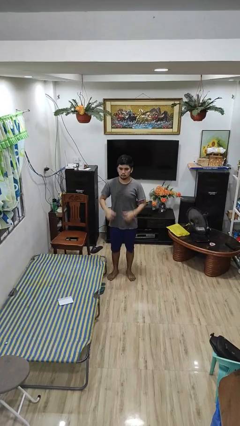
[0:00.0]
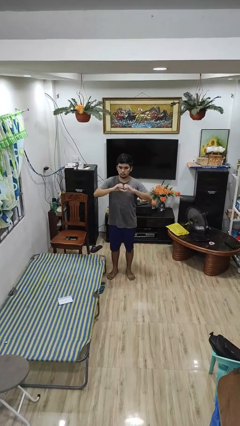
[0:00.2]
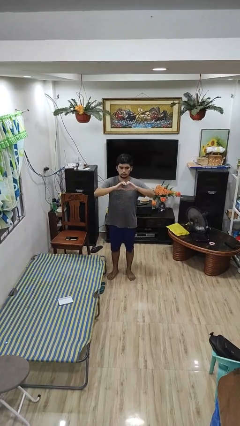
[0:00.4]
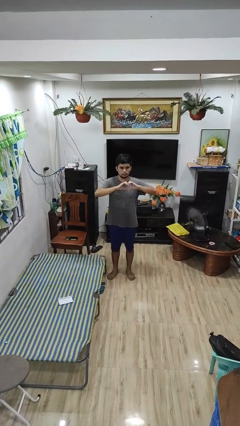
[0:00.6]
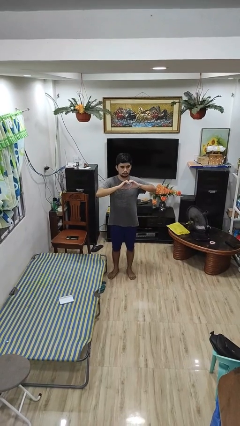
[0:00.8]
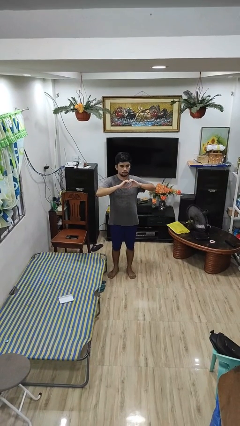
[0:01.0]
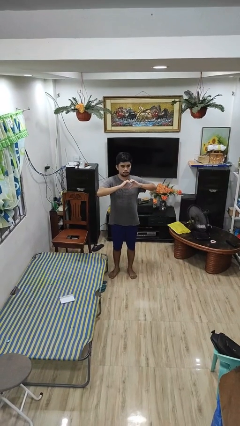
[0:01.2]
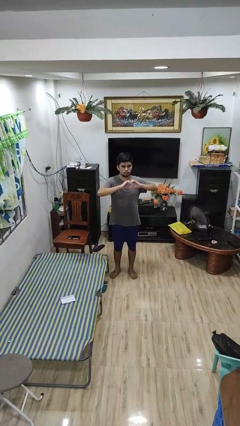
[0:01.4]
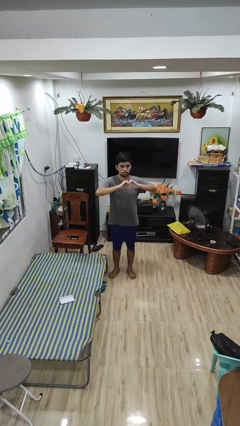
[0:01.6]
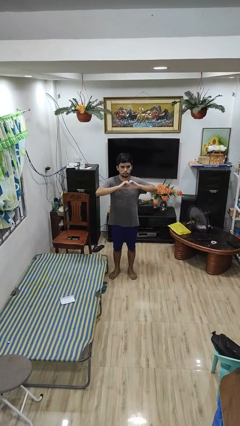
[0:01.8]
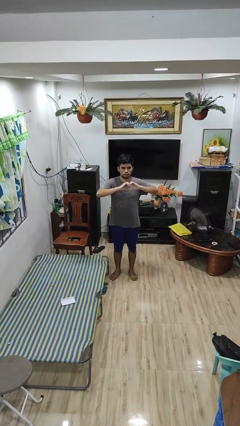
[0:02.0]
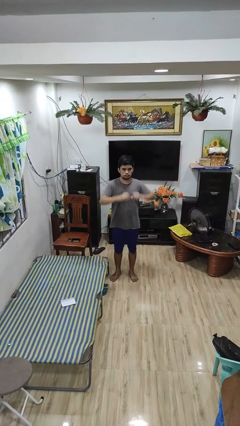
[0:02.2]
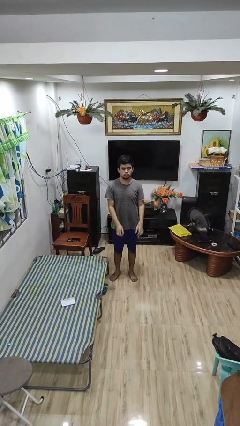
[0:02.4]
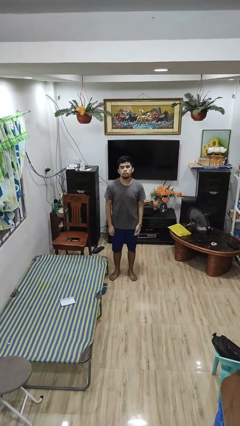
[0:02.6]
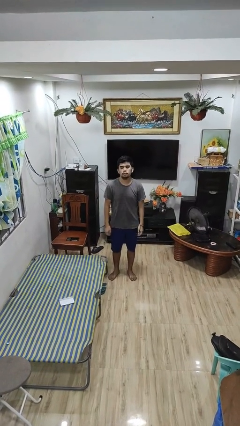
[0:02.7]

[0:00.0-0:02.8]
person gestures heart

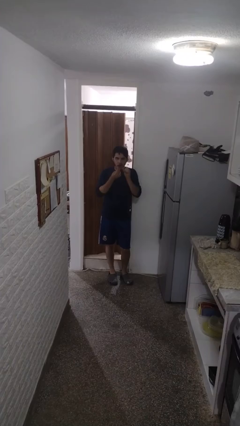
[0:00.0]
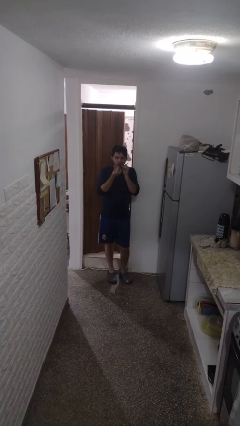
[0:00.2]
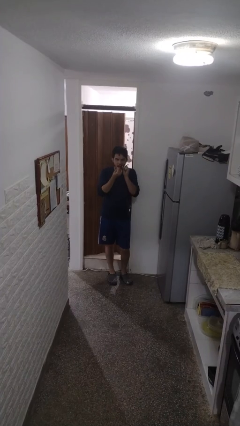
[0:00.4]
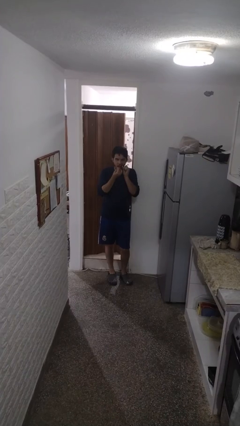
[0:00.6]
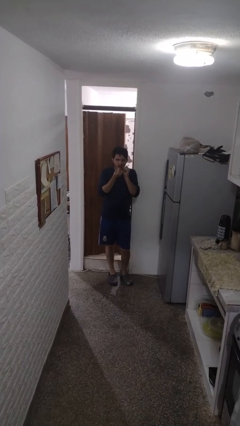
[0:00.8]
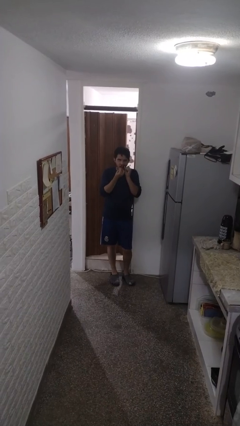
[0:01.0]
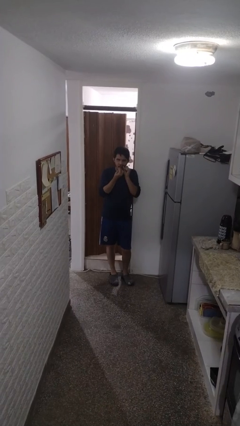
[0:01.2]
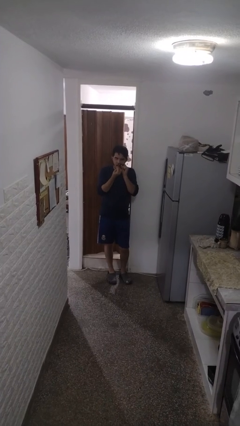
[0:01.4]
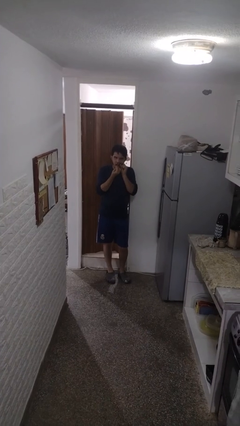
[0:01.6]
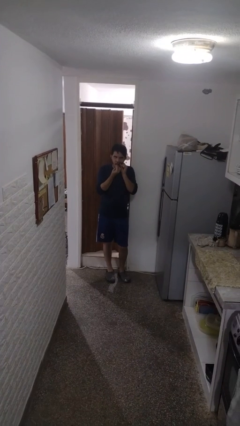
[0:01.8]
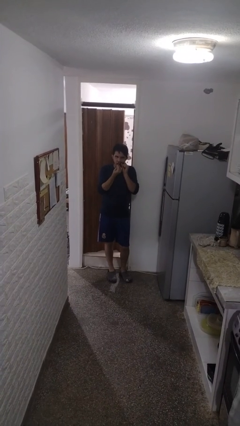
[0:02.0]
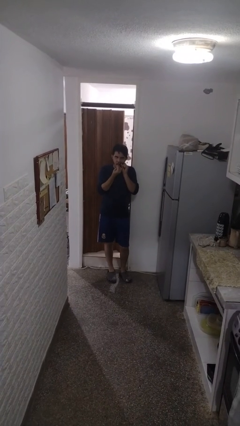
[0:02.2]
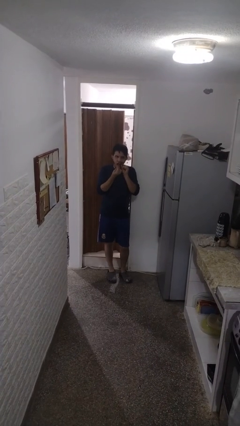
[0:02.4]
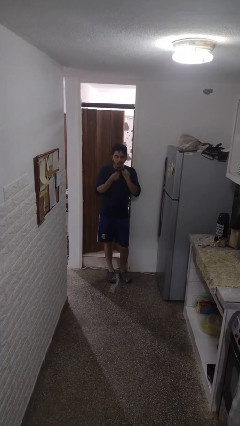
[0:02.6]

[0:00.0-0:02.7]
person flosses

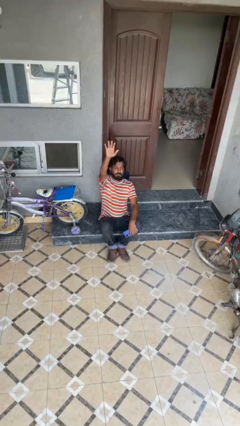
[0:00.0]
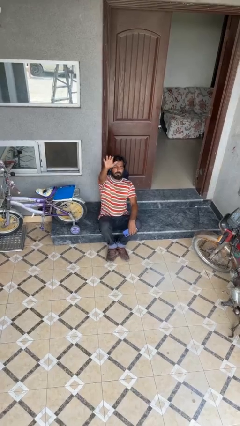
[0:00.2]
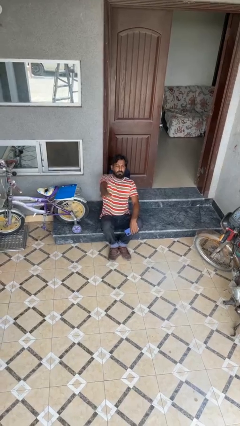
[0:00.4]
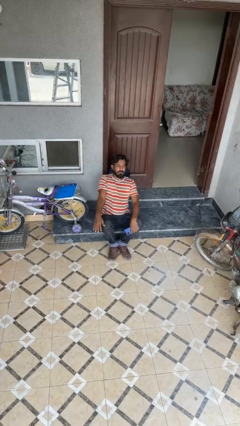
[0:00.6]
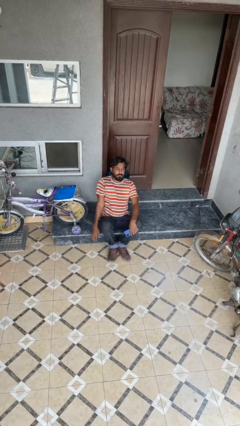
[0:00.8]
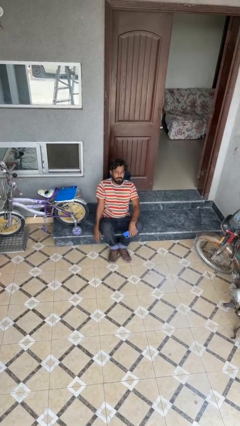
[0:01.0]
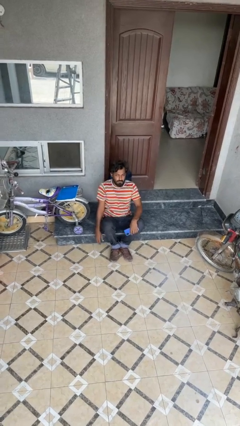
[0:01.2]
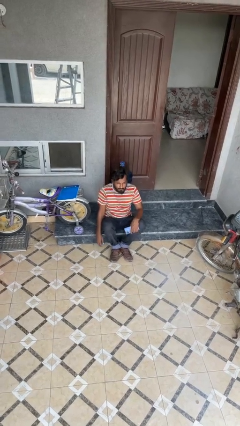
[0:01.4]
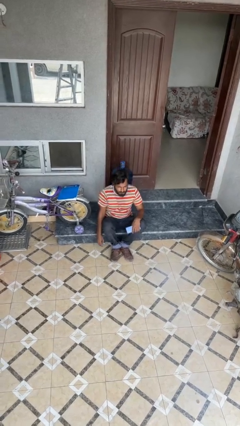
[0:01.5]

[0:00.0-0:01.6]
person gestures lower hand

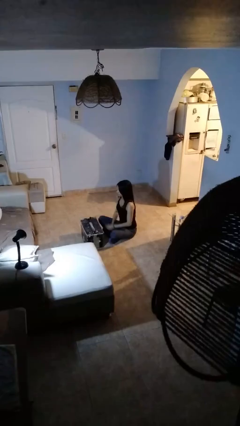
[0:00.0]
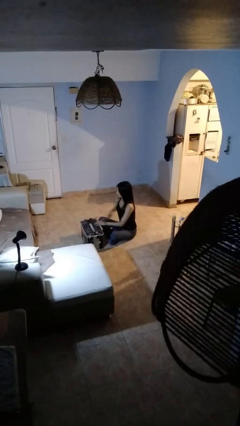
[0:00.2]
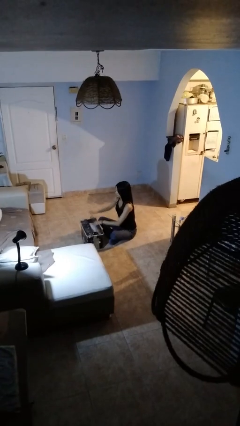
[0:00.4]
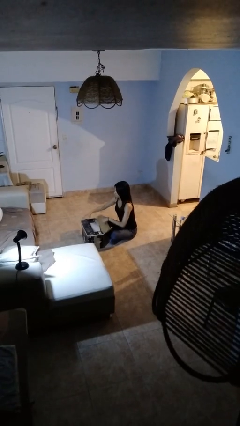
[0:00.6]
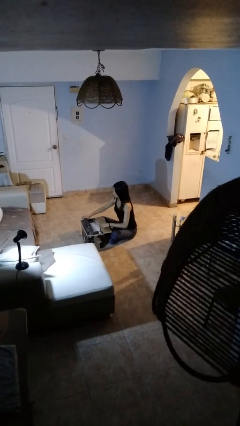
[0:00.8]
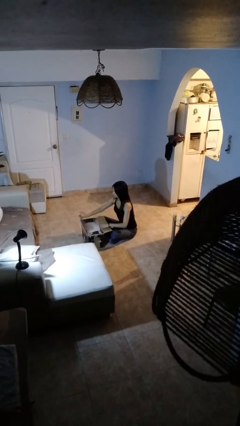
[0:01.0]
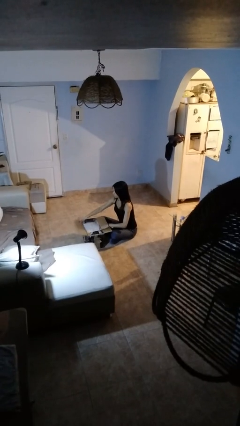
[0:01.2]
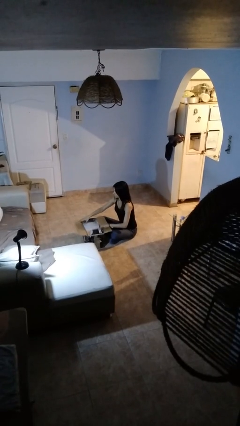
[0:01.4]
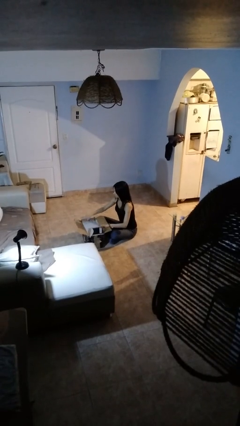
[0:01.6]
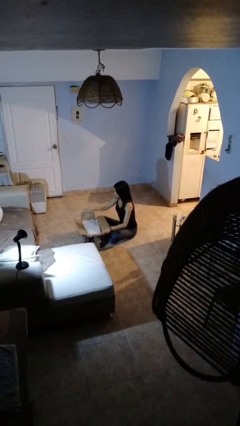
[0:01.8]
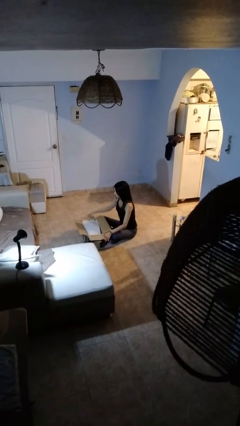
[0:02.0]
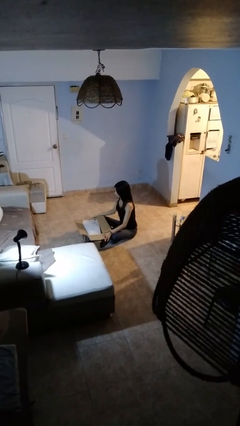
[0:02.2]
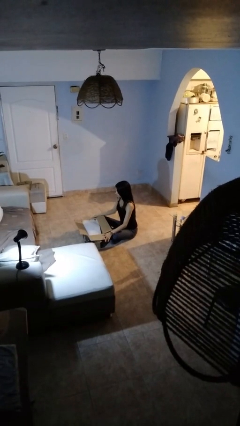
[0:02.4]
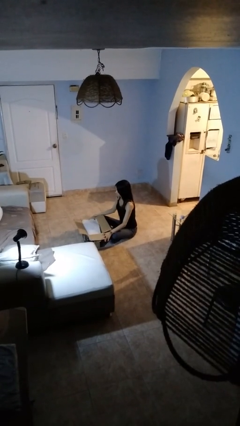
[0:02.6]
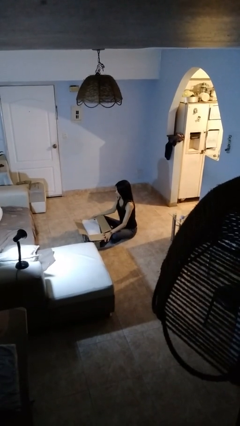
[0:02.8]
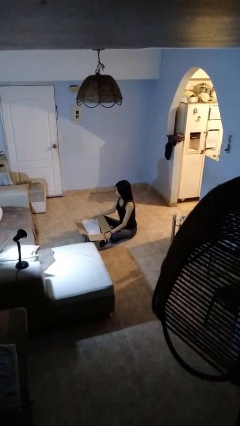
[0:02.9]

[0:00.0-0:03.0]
person opens box

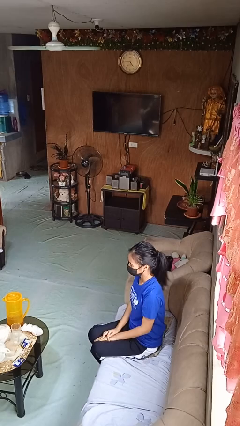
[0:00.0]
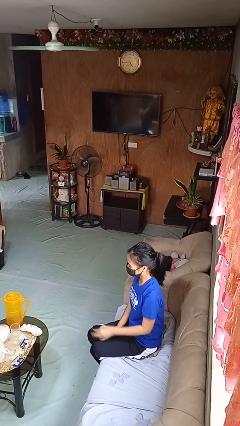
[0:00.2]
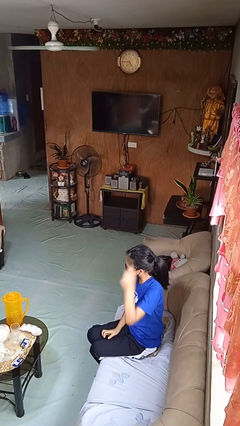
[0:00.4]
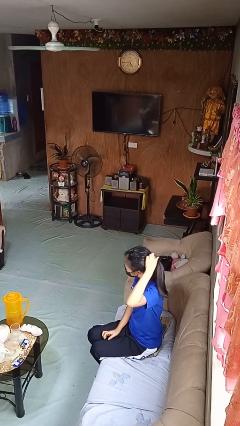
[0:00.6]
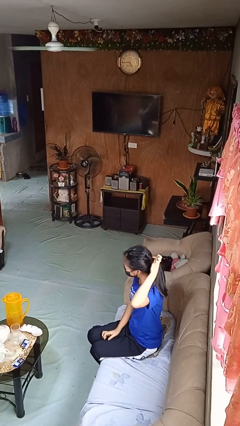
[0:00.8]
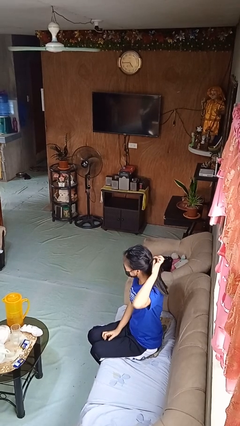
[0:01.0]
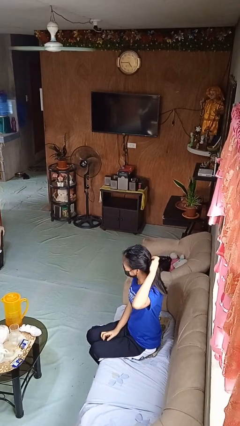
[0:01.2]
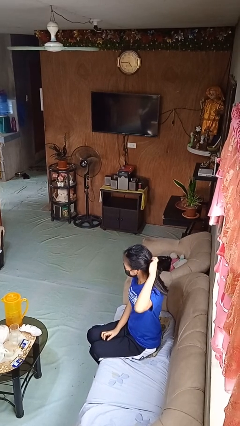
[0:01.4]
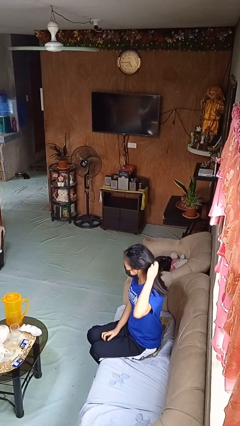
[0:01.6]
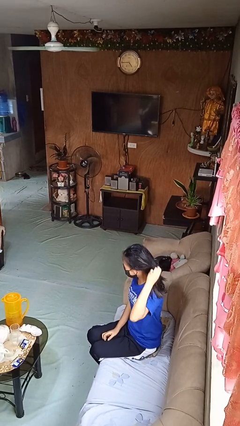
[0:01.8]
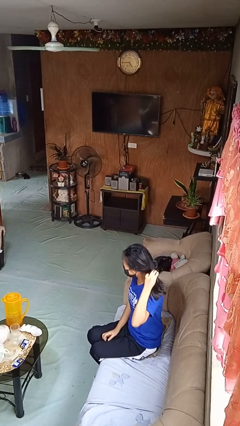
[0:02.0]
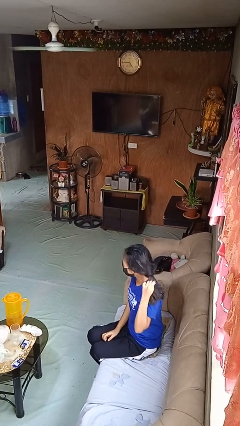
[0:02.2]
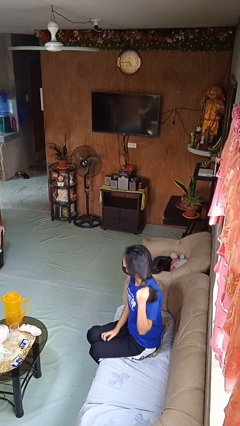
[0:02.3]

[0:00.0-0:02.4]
person takes off hairtie

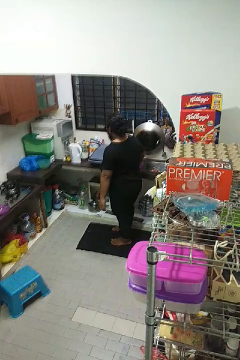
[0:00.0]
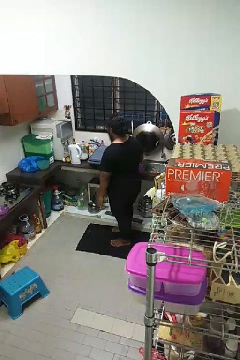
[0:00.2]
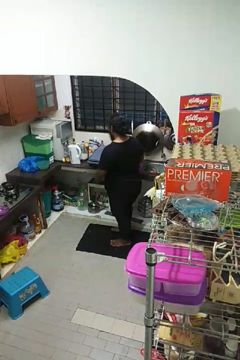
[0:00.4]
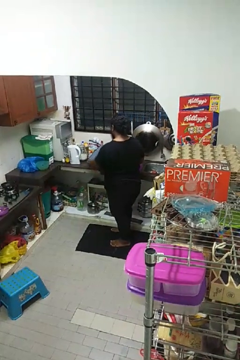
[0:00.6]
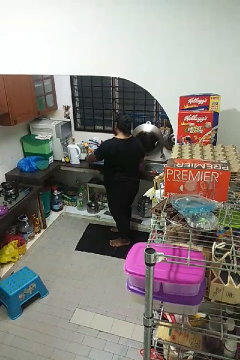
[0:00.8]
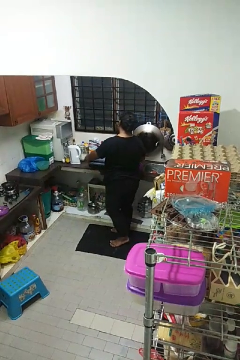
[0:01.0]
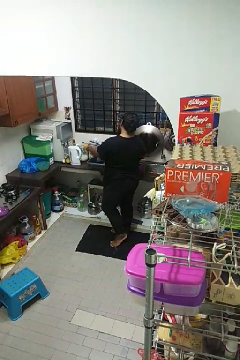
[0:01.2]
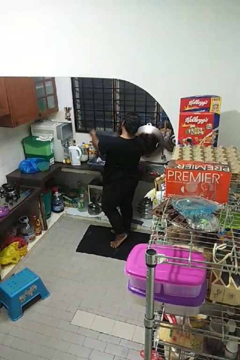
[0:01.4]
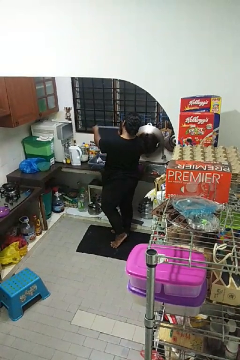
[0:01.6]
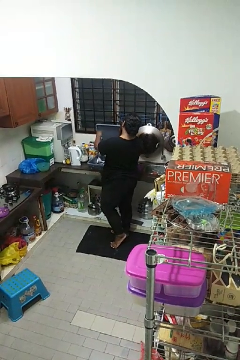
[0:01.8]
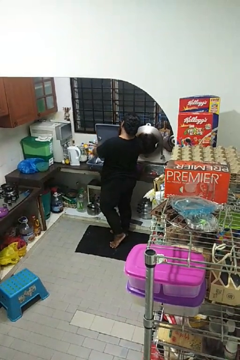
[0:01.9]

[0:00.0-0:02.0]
person opens dishwasher

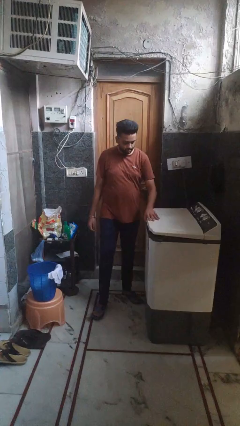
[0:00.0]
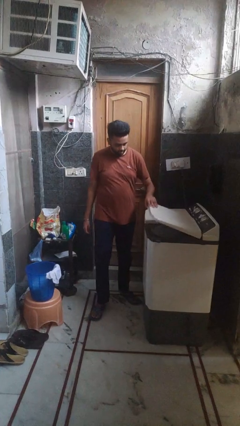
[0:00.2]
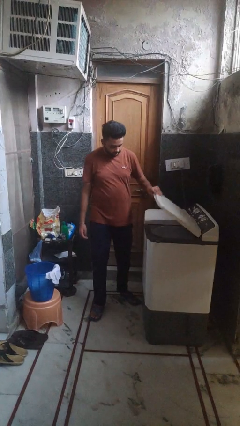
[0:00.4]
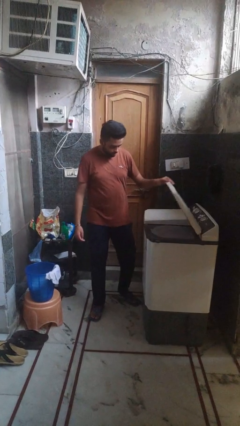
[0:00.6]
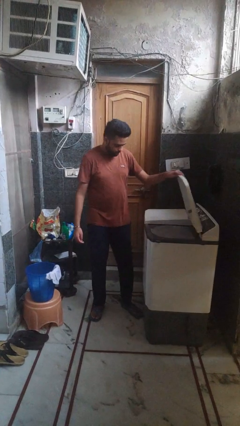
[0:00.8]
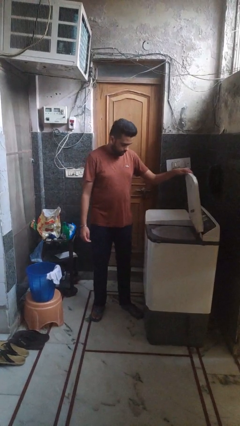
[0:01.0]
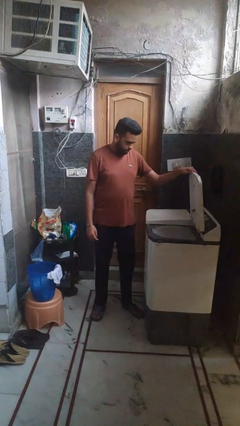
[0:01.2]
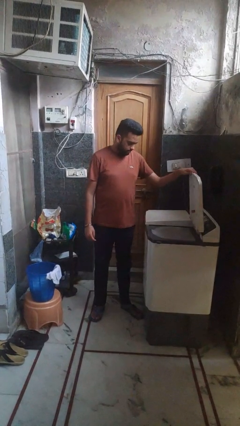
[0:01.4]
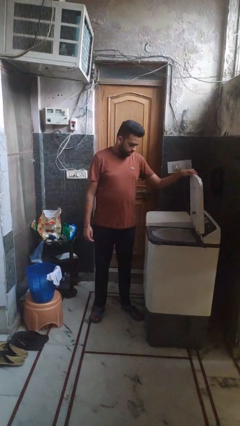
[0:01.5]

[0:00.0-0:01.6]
person opens clothes washer

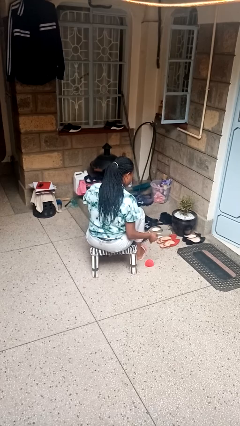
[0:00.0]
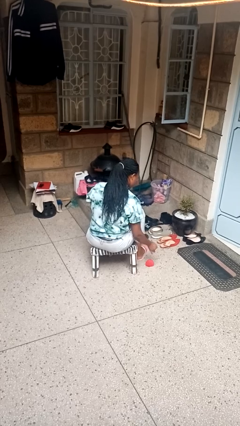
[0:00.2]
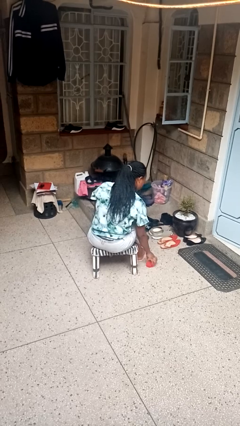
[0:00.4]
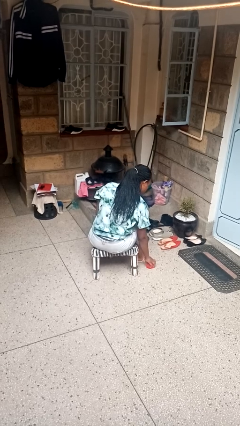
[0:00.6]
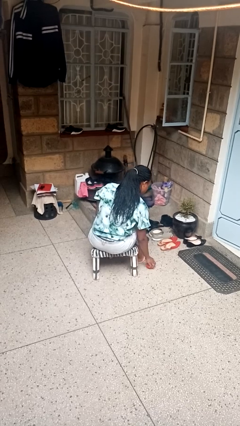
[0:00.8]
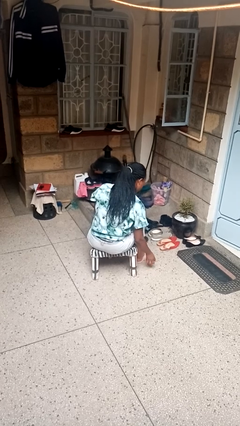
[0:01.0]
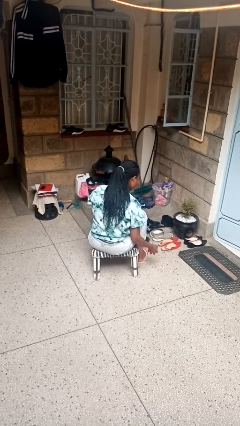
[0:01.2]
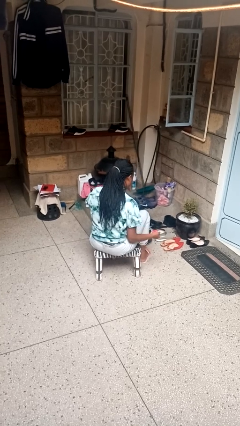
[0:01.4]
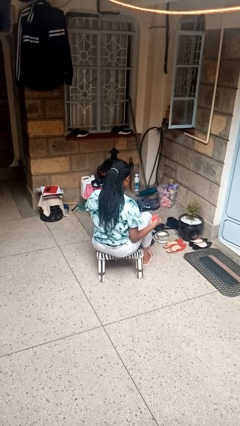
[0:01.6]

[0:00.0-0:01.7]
person picks up object from floor
